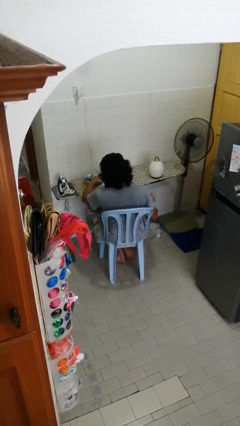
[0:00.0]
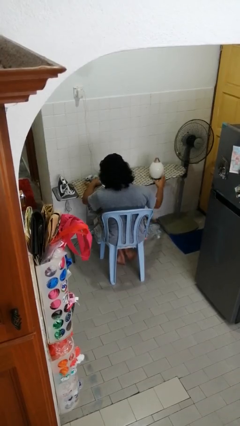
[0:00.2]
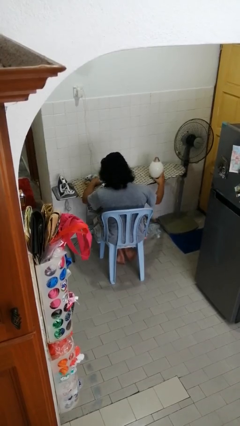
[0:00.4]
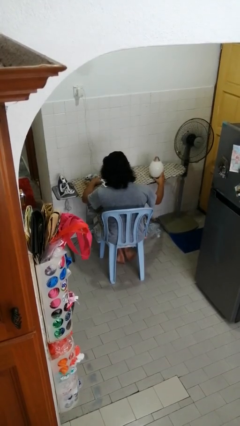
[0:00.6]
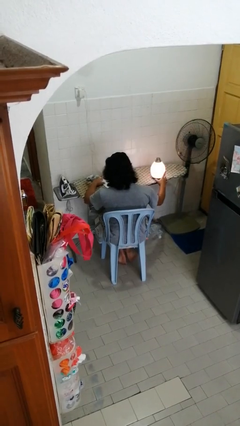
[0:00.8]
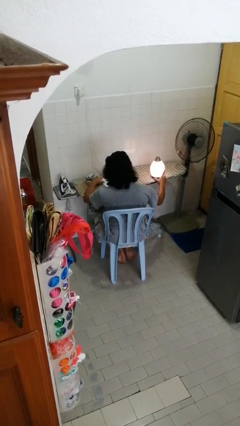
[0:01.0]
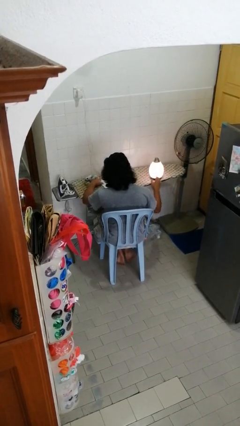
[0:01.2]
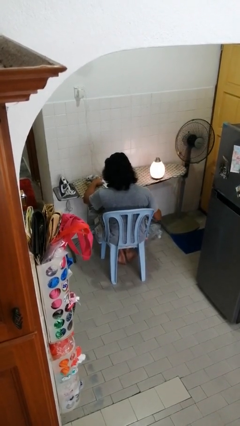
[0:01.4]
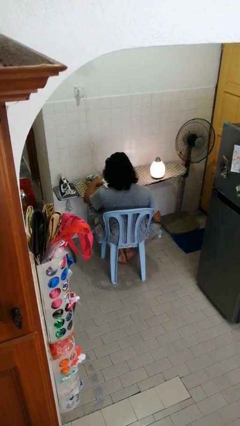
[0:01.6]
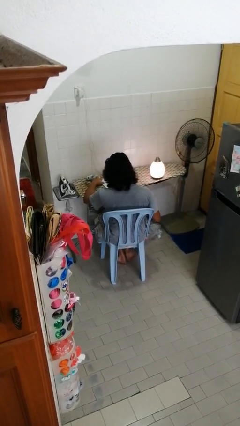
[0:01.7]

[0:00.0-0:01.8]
person turns on lamp

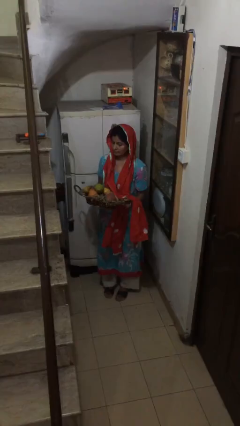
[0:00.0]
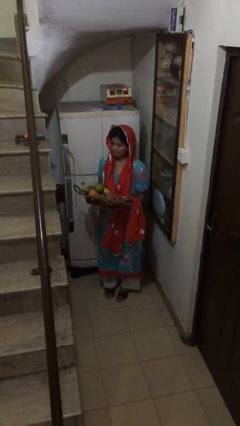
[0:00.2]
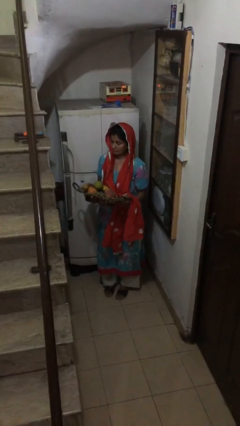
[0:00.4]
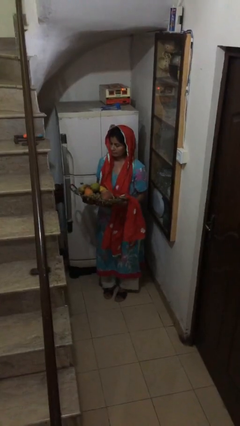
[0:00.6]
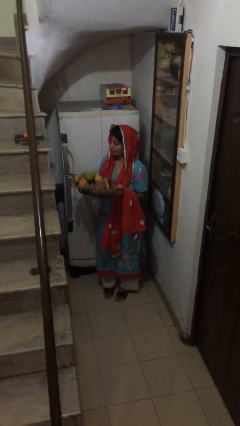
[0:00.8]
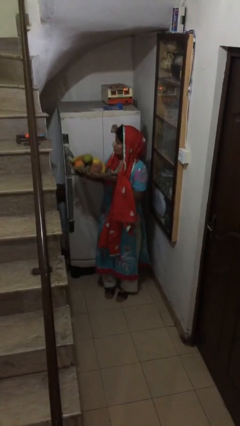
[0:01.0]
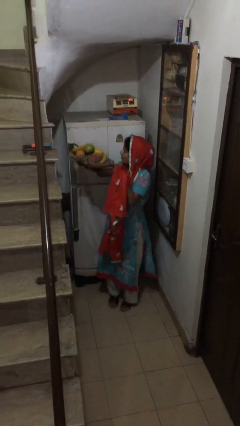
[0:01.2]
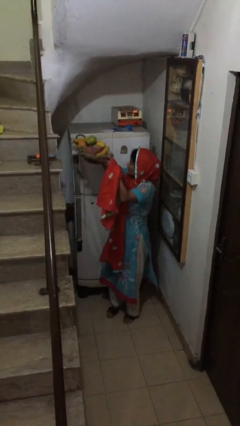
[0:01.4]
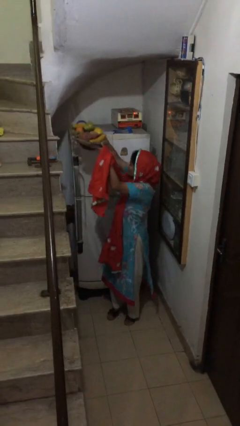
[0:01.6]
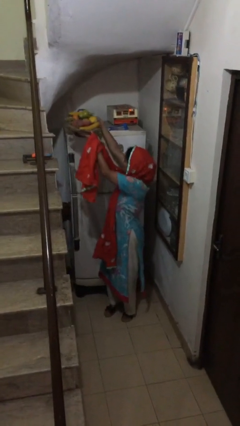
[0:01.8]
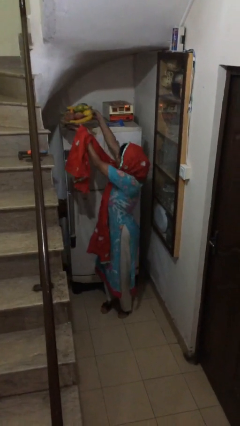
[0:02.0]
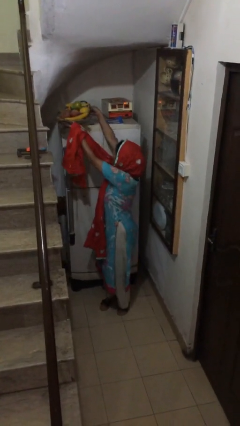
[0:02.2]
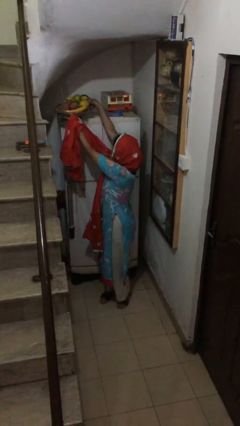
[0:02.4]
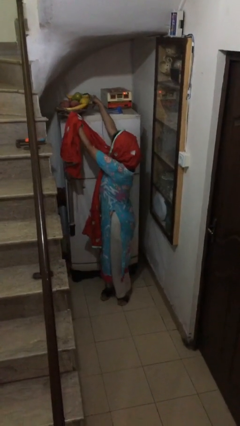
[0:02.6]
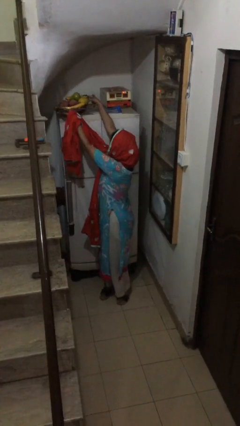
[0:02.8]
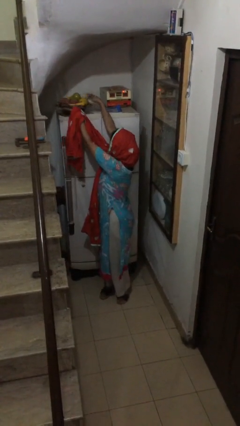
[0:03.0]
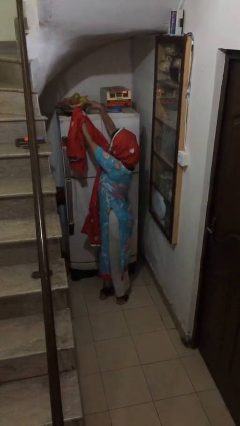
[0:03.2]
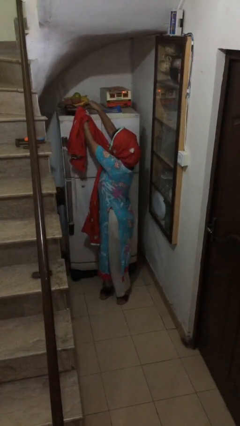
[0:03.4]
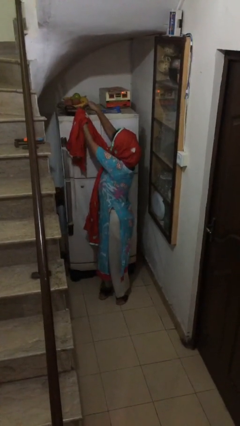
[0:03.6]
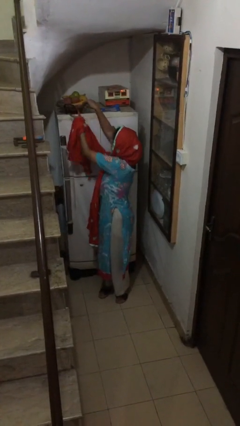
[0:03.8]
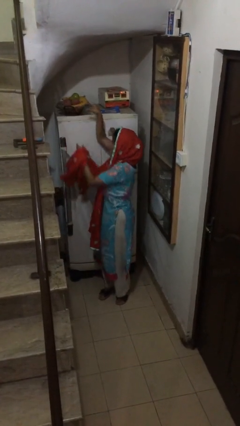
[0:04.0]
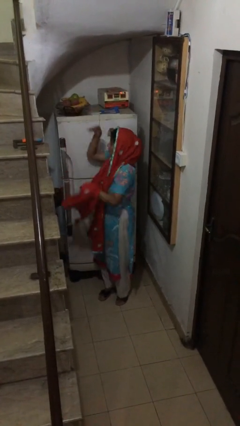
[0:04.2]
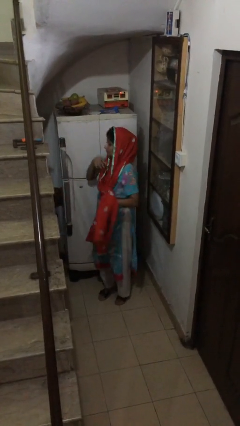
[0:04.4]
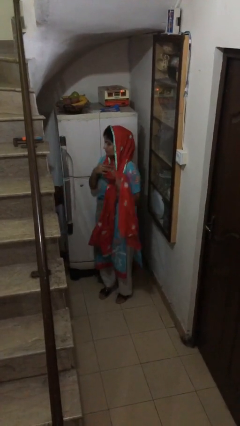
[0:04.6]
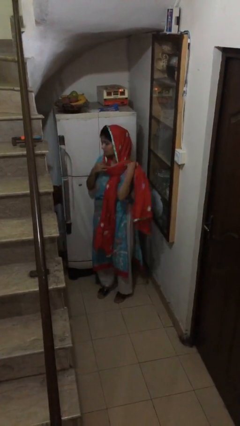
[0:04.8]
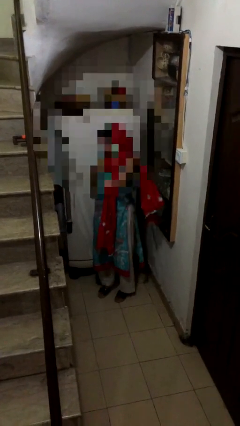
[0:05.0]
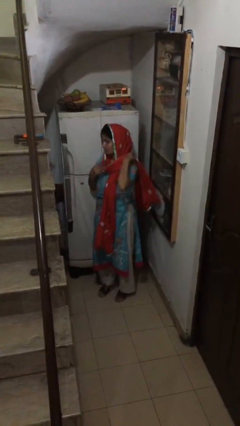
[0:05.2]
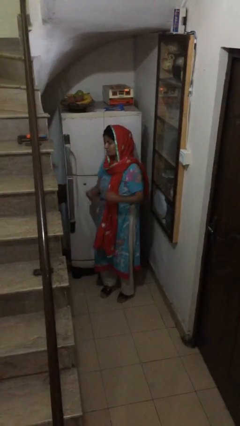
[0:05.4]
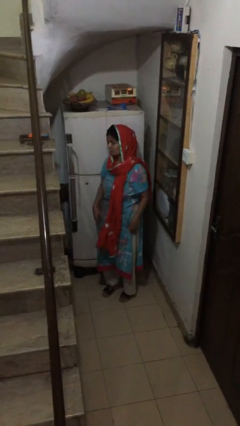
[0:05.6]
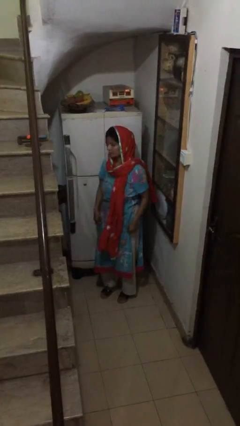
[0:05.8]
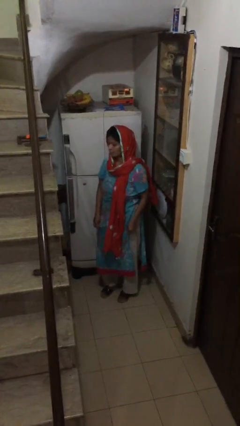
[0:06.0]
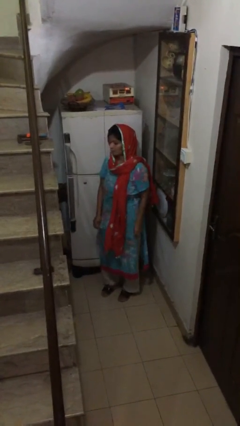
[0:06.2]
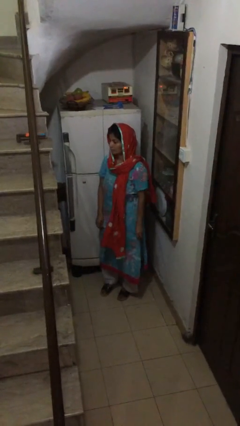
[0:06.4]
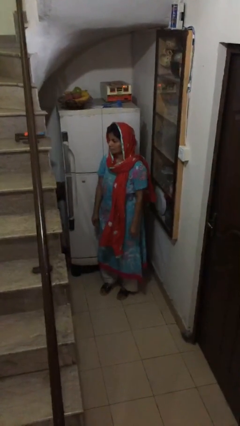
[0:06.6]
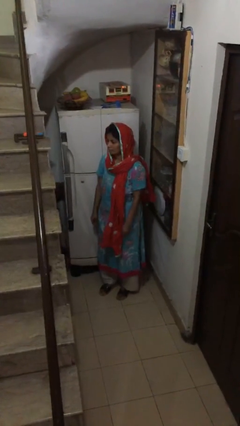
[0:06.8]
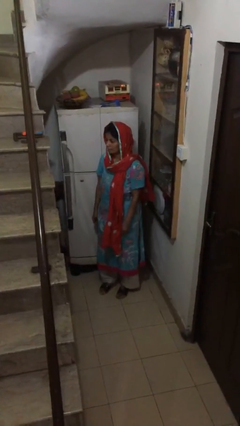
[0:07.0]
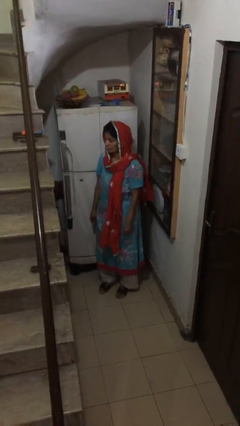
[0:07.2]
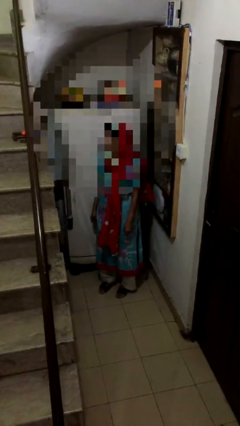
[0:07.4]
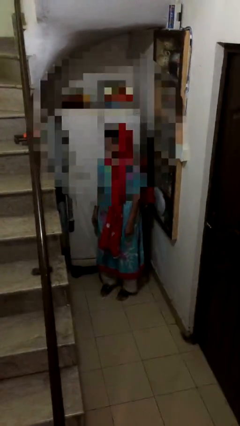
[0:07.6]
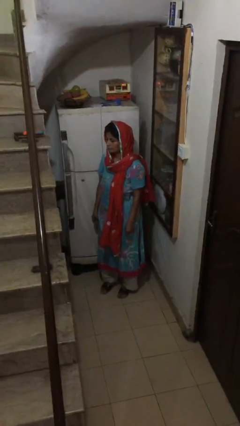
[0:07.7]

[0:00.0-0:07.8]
person puts down object on shelf

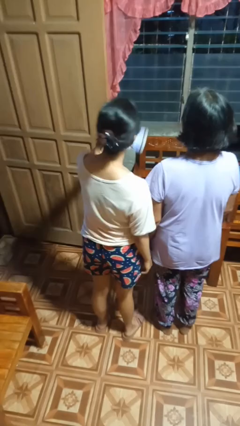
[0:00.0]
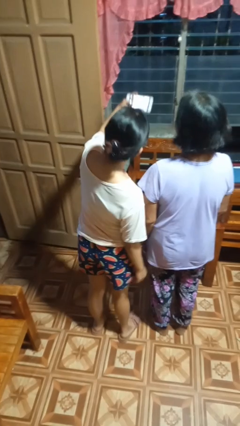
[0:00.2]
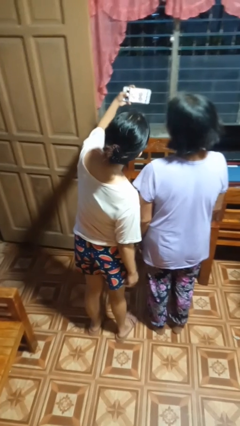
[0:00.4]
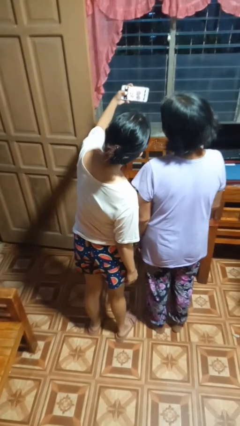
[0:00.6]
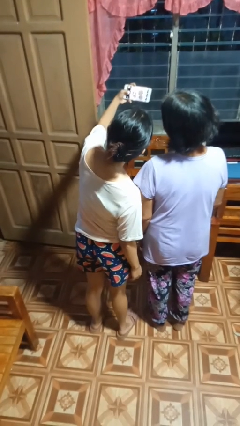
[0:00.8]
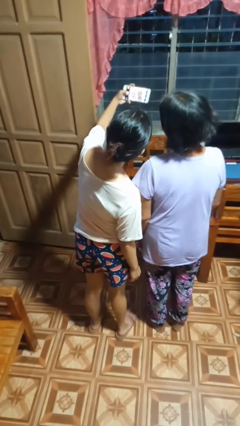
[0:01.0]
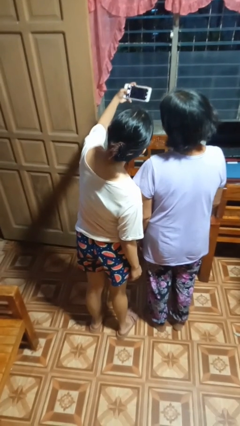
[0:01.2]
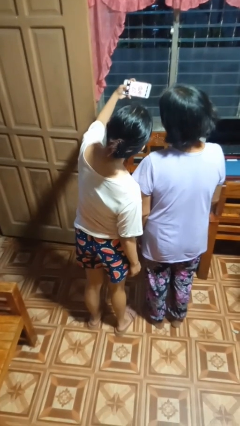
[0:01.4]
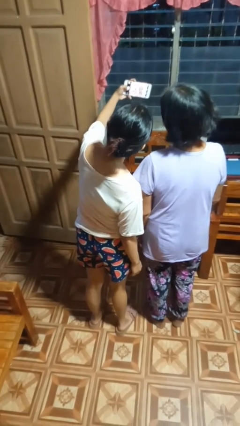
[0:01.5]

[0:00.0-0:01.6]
person takes selfie with person

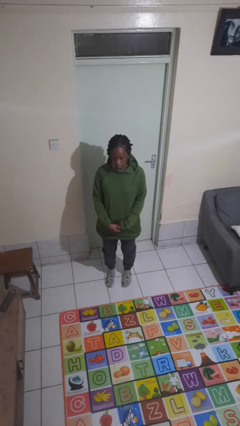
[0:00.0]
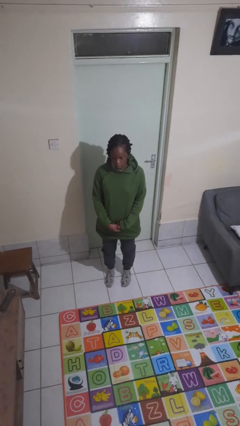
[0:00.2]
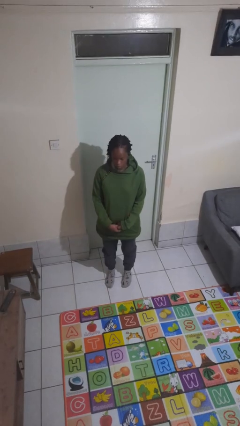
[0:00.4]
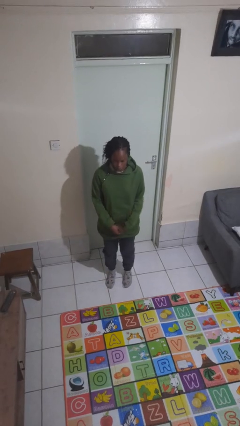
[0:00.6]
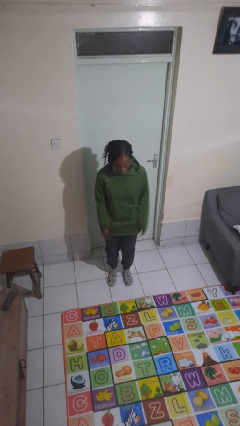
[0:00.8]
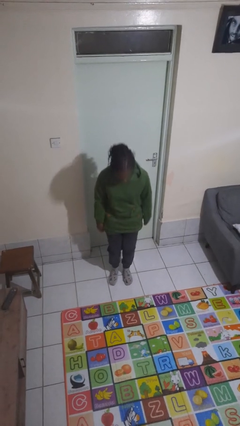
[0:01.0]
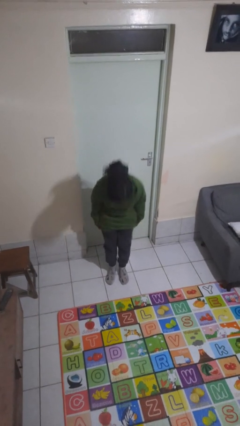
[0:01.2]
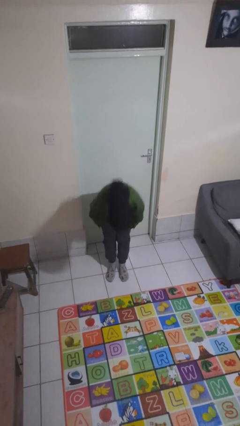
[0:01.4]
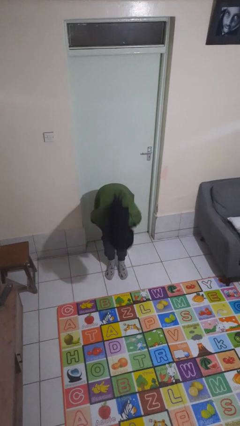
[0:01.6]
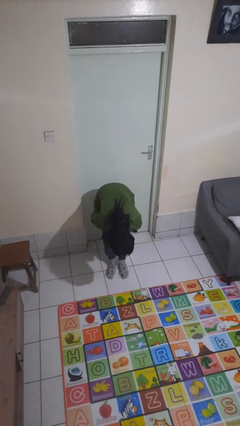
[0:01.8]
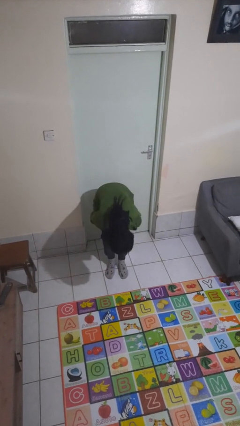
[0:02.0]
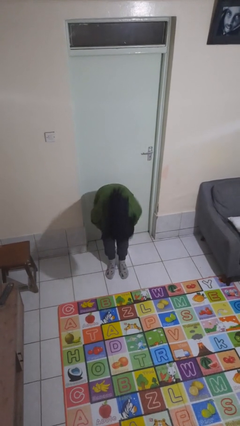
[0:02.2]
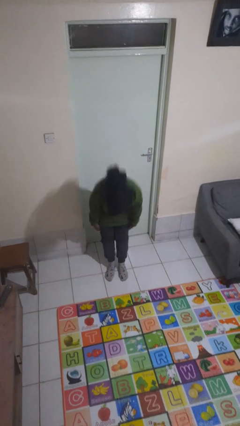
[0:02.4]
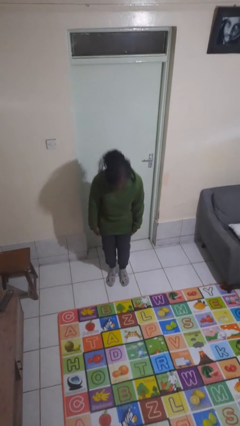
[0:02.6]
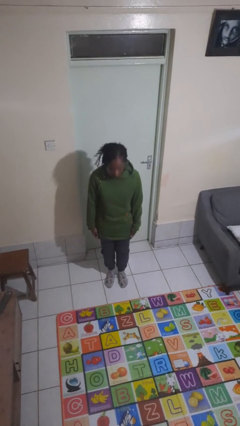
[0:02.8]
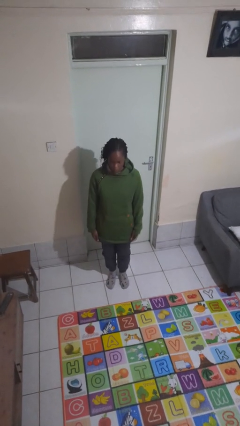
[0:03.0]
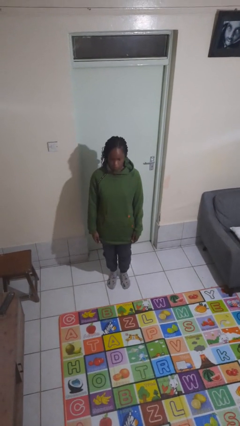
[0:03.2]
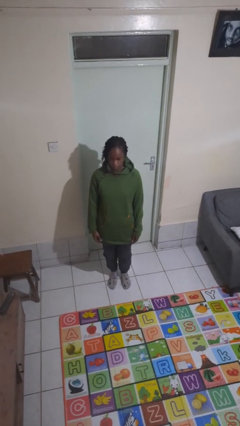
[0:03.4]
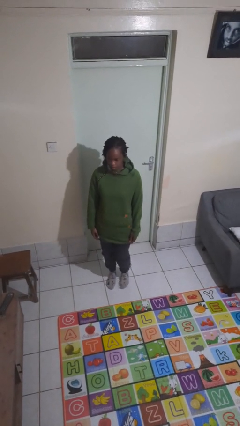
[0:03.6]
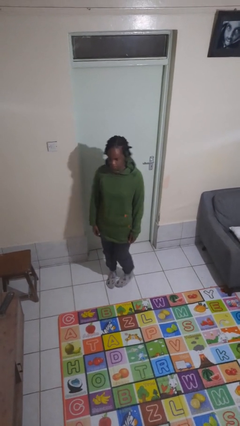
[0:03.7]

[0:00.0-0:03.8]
person bows

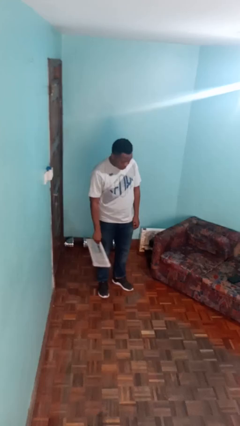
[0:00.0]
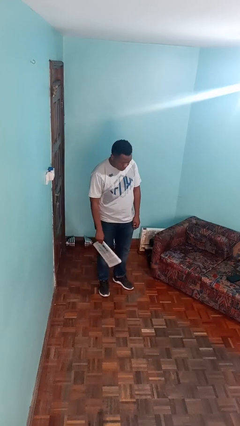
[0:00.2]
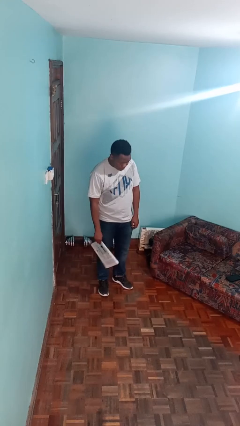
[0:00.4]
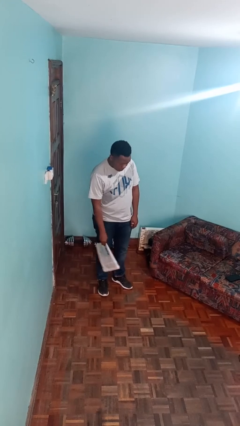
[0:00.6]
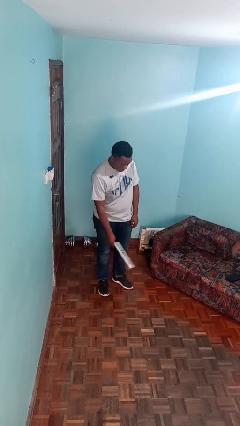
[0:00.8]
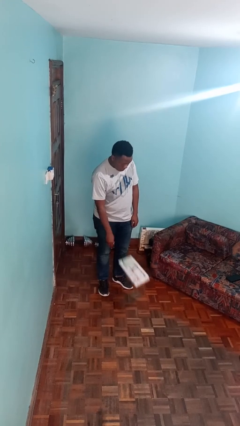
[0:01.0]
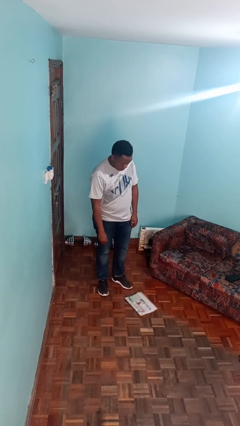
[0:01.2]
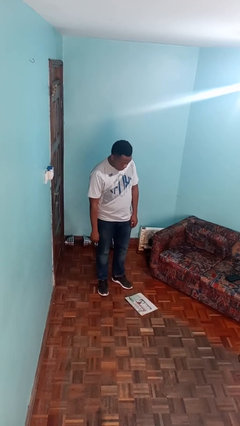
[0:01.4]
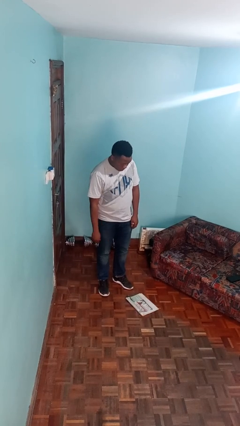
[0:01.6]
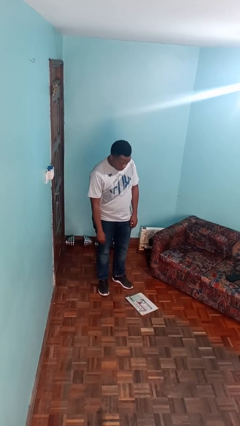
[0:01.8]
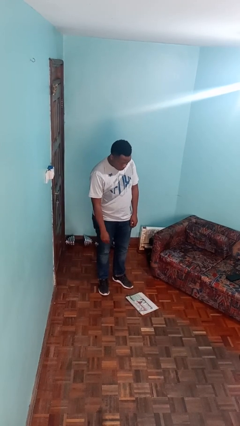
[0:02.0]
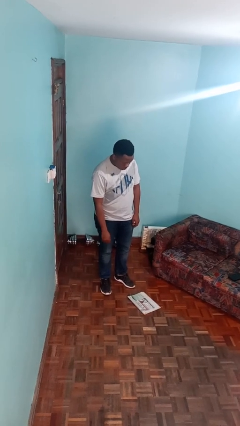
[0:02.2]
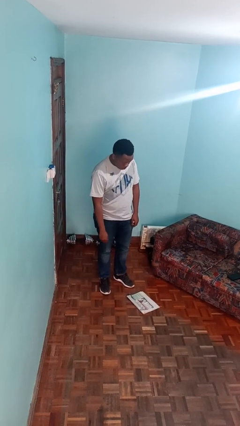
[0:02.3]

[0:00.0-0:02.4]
person drops object

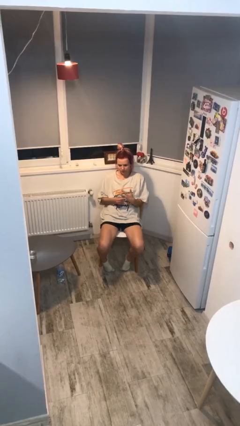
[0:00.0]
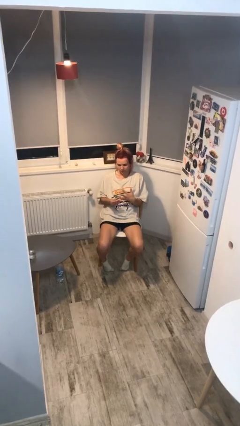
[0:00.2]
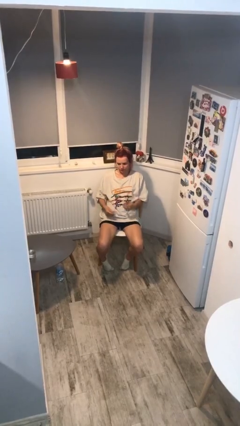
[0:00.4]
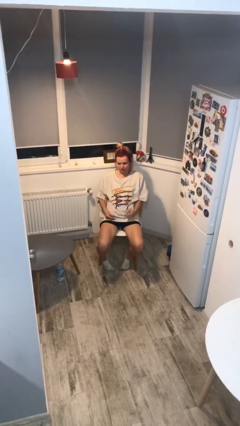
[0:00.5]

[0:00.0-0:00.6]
person takes off ring
